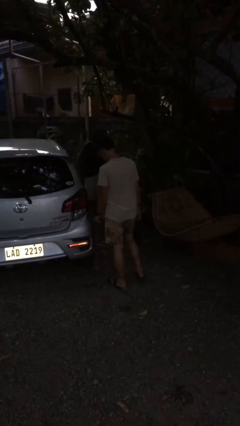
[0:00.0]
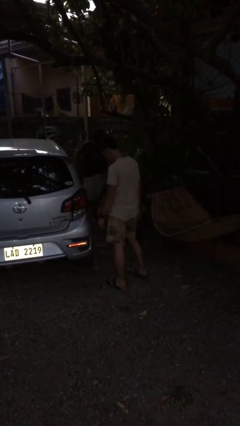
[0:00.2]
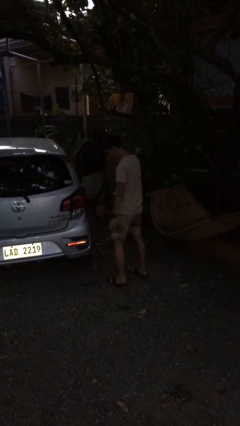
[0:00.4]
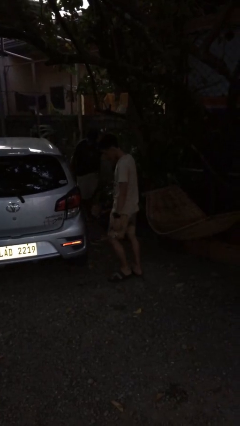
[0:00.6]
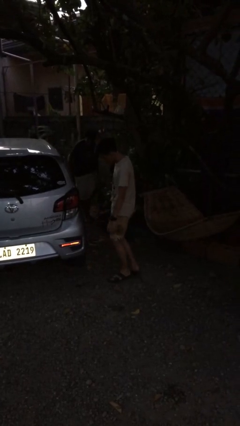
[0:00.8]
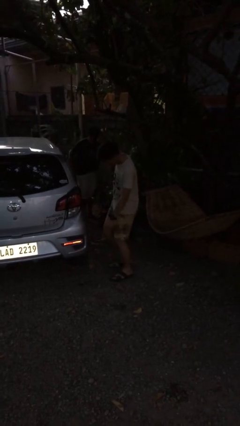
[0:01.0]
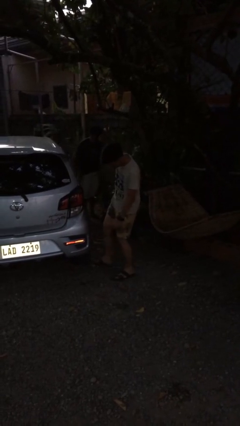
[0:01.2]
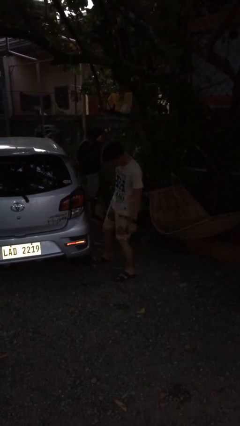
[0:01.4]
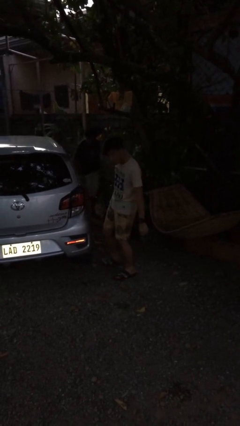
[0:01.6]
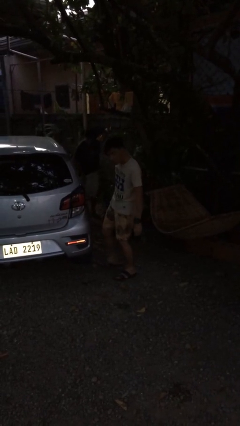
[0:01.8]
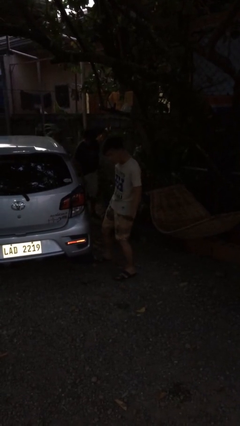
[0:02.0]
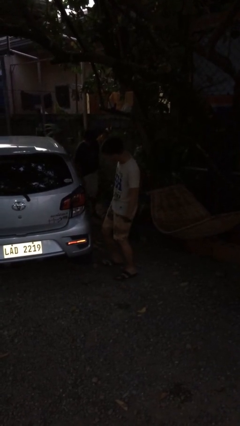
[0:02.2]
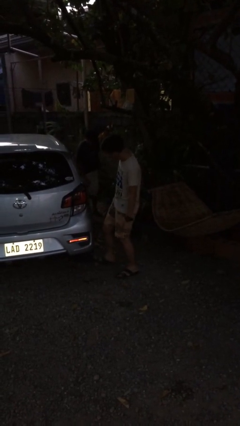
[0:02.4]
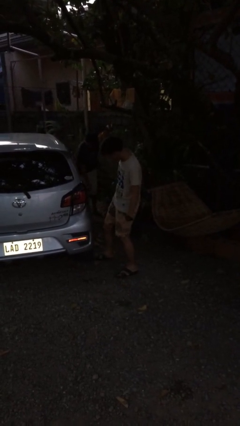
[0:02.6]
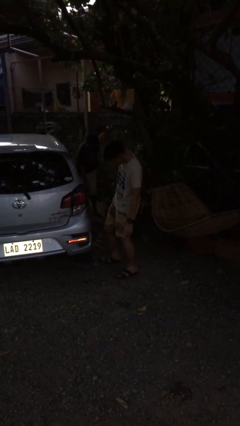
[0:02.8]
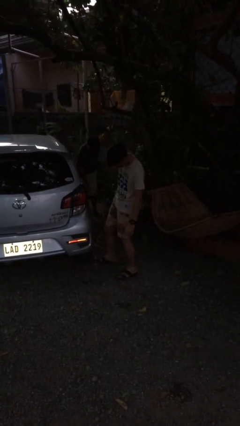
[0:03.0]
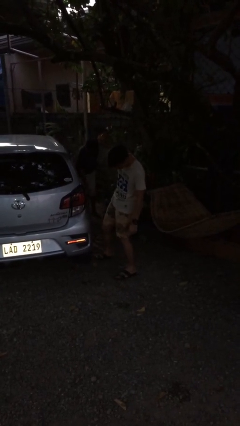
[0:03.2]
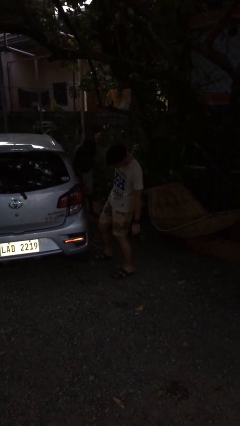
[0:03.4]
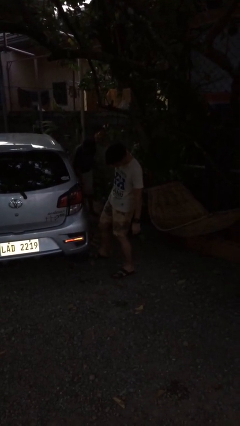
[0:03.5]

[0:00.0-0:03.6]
person kicks car tires

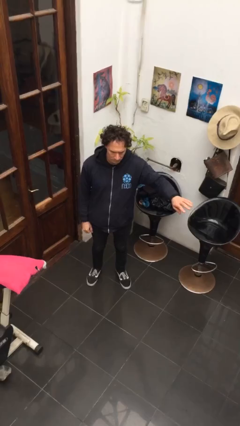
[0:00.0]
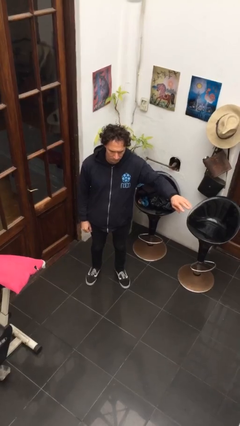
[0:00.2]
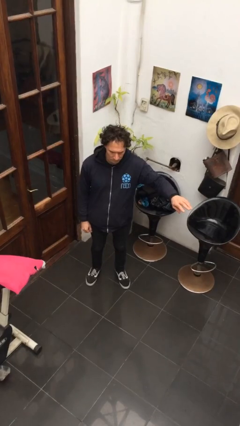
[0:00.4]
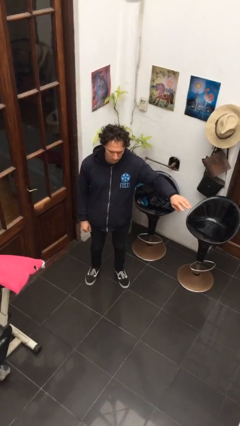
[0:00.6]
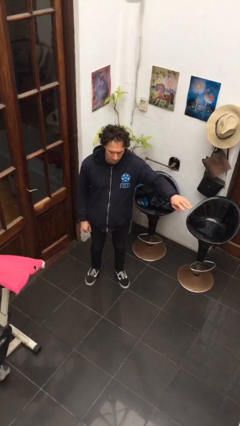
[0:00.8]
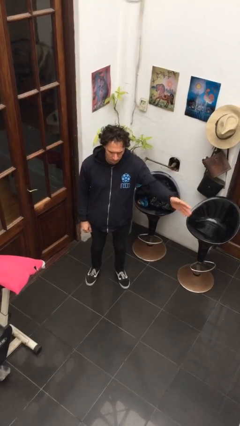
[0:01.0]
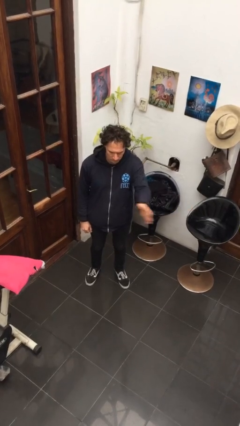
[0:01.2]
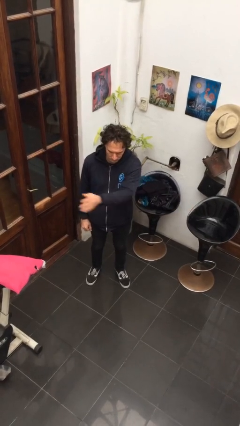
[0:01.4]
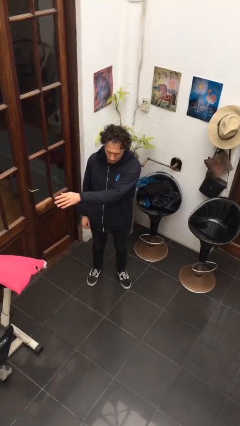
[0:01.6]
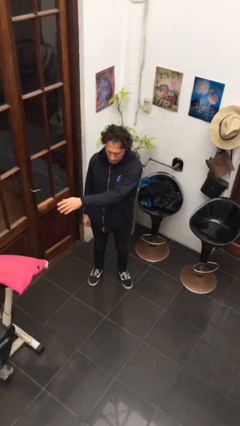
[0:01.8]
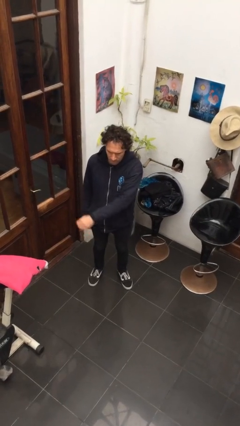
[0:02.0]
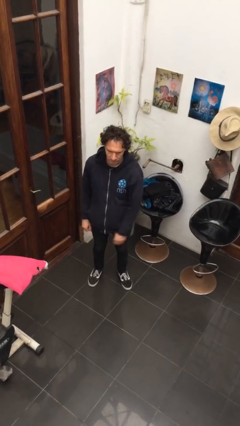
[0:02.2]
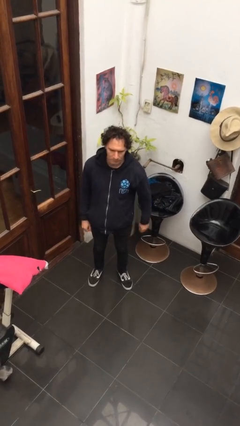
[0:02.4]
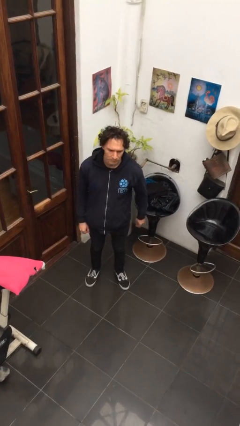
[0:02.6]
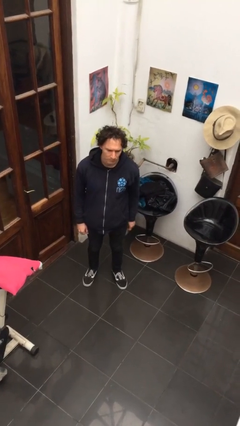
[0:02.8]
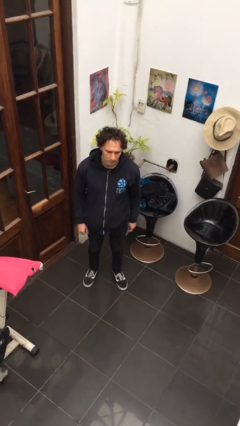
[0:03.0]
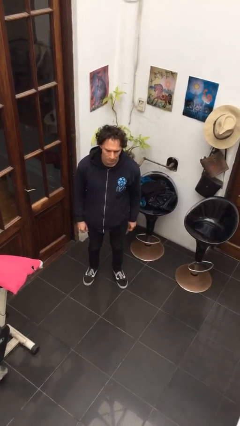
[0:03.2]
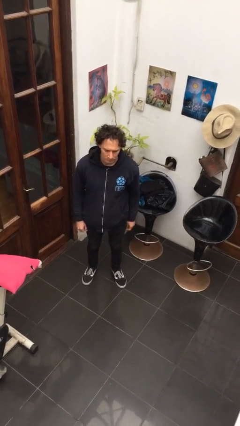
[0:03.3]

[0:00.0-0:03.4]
person gestures swipe right

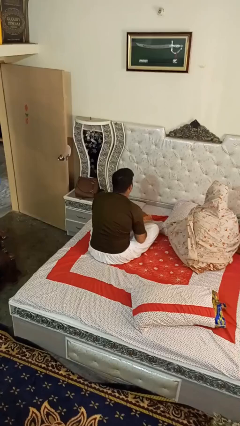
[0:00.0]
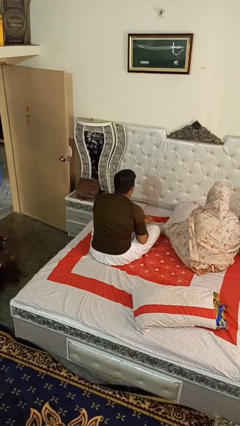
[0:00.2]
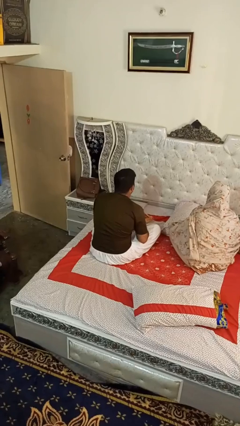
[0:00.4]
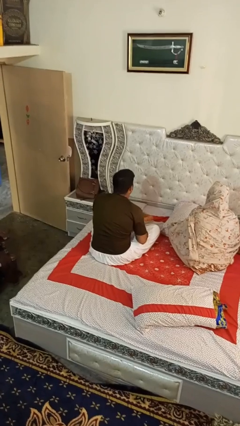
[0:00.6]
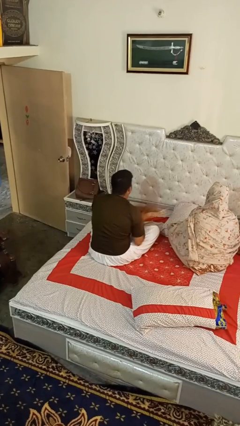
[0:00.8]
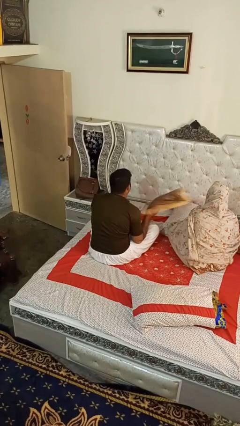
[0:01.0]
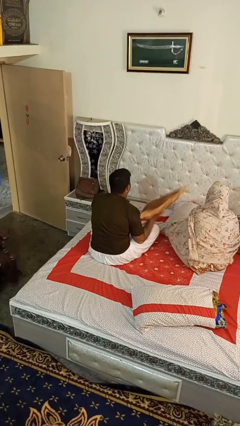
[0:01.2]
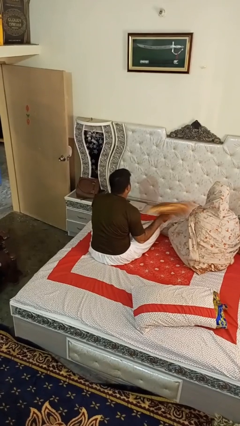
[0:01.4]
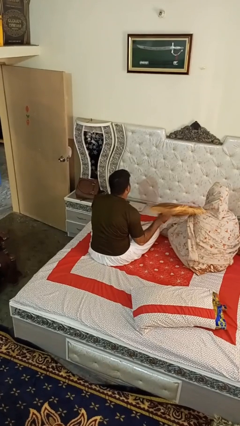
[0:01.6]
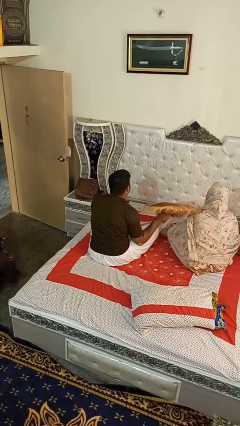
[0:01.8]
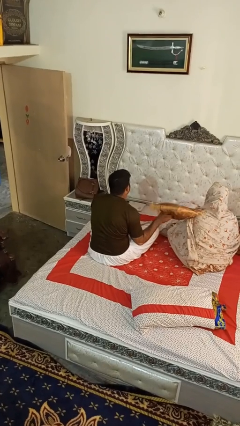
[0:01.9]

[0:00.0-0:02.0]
person hits person with pillow

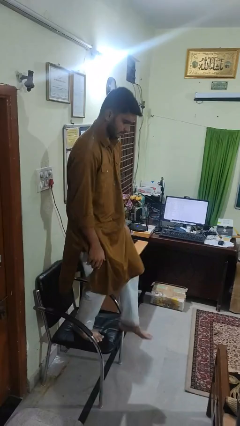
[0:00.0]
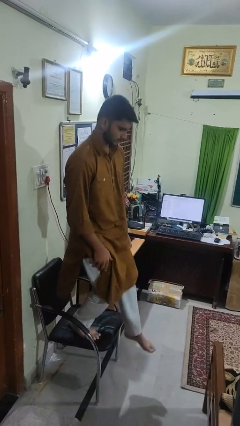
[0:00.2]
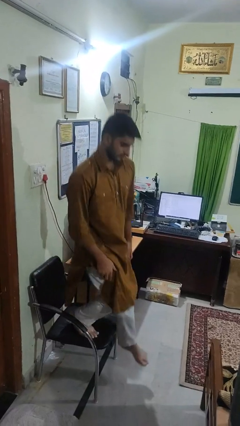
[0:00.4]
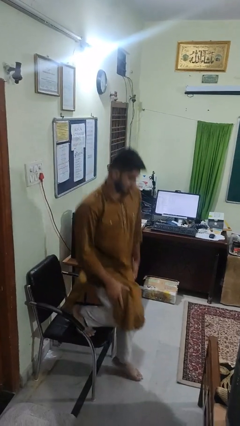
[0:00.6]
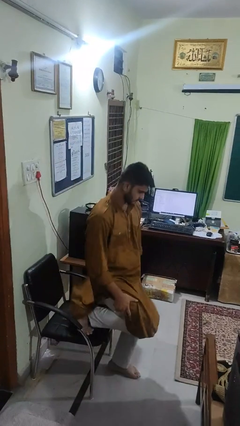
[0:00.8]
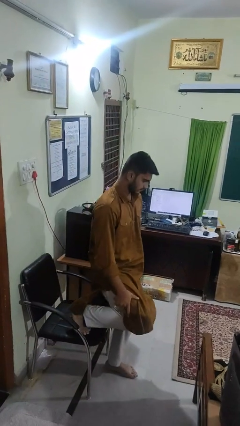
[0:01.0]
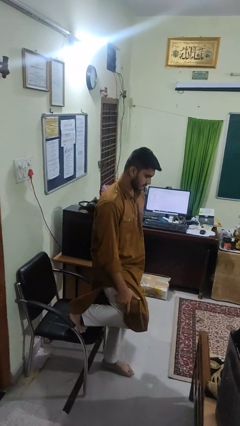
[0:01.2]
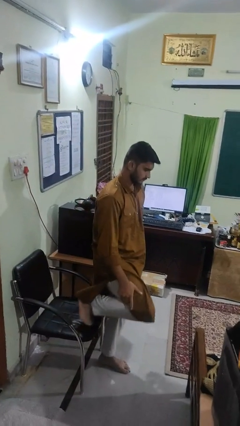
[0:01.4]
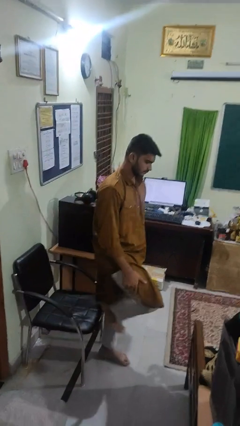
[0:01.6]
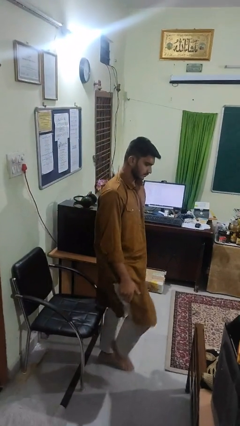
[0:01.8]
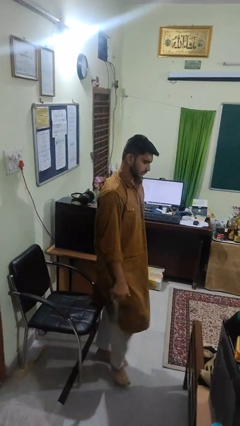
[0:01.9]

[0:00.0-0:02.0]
person climbs off chair

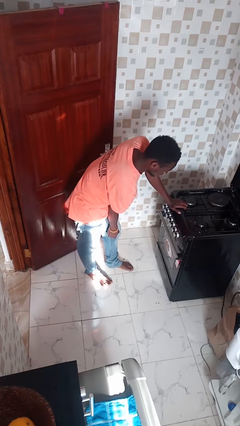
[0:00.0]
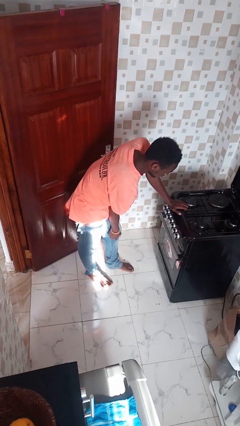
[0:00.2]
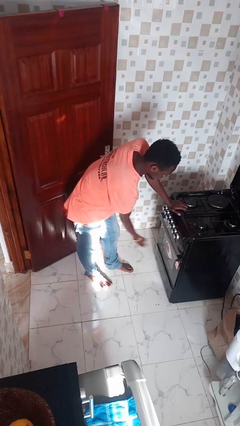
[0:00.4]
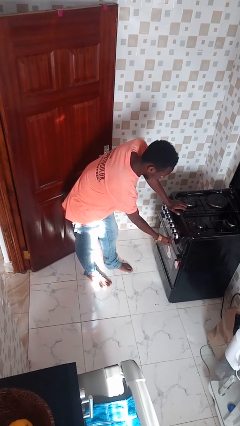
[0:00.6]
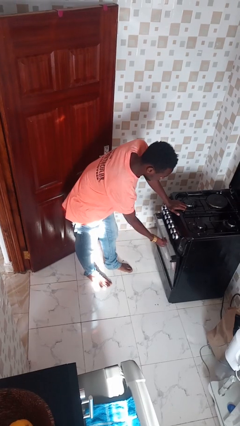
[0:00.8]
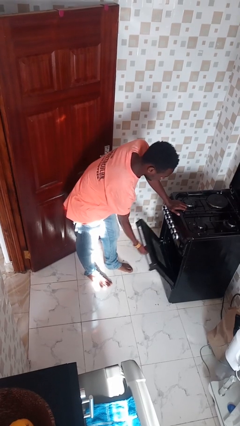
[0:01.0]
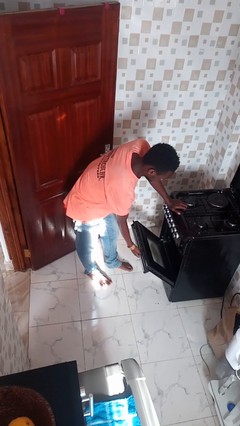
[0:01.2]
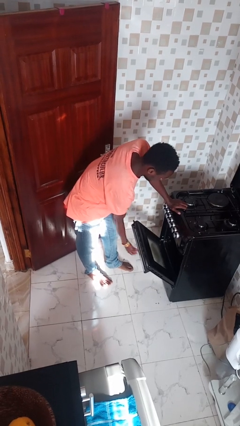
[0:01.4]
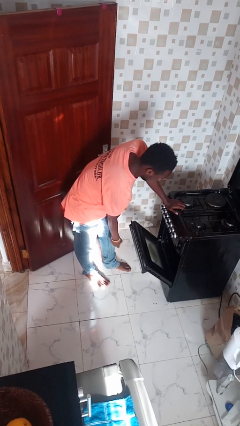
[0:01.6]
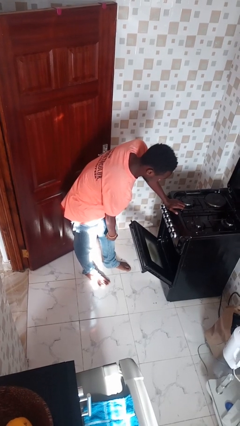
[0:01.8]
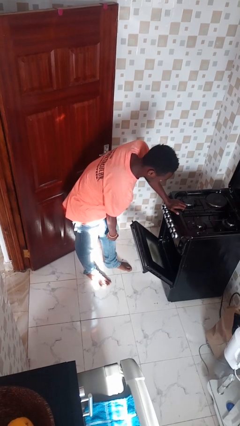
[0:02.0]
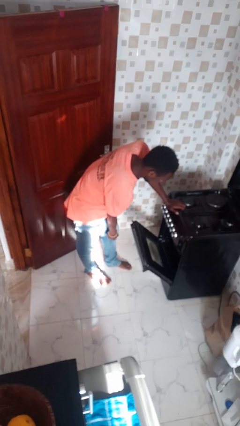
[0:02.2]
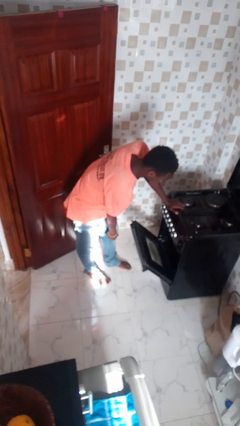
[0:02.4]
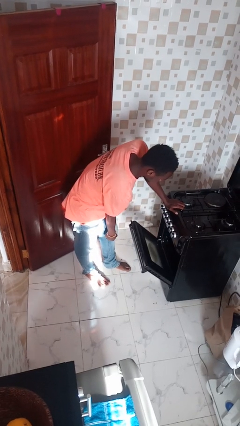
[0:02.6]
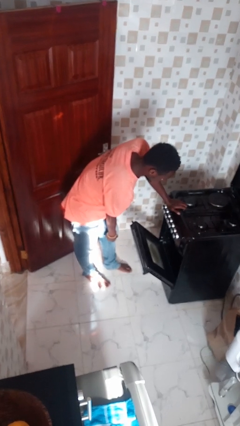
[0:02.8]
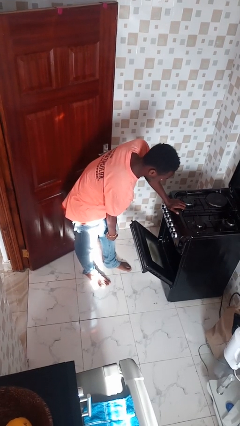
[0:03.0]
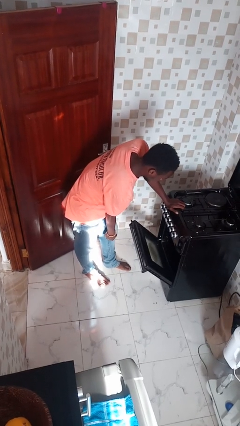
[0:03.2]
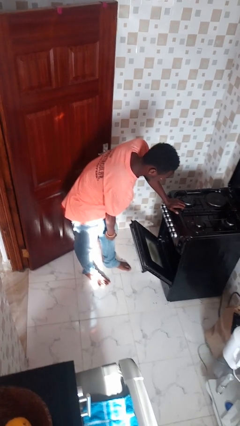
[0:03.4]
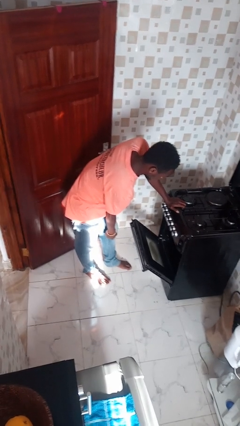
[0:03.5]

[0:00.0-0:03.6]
person opens oven door

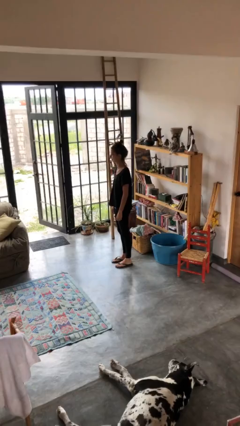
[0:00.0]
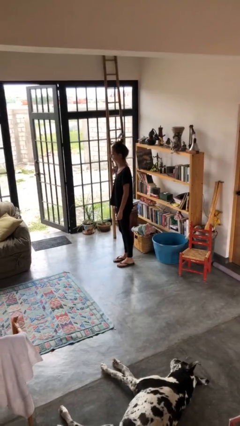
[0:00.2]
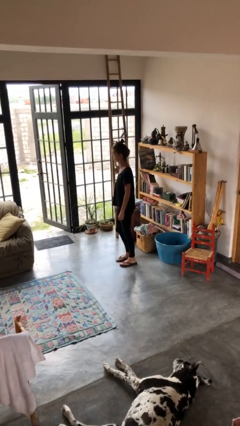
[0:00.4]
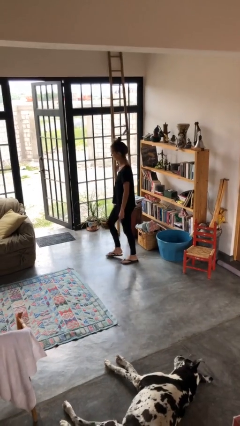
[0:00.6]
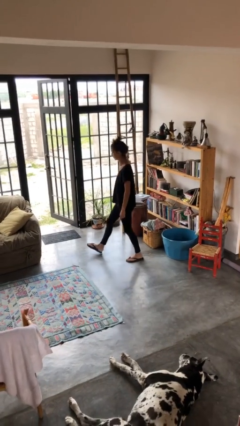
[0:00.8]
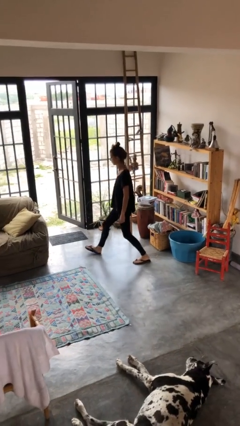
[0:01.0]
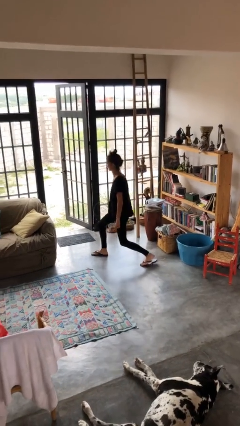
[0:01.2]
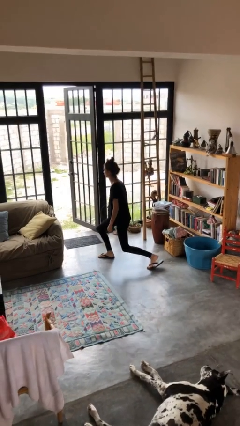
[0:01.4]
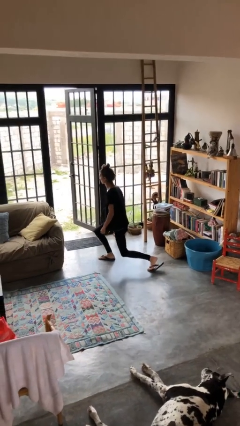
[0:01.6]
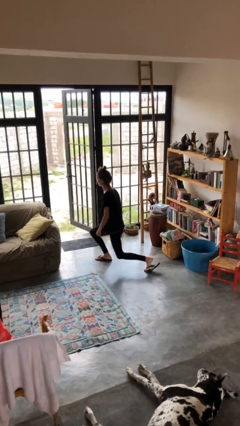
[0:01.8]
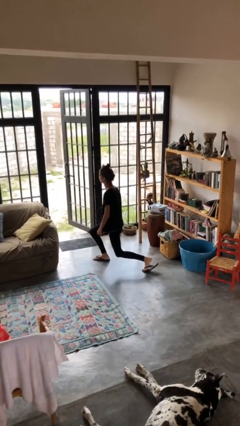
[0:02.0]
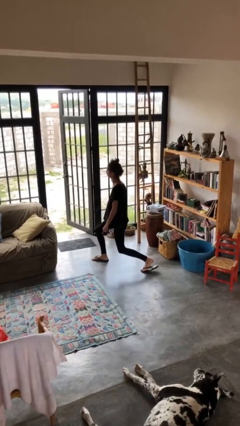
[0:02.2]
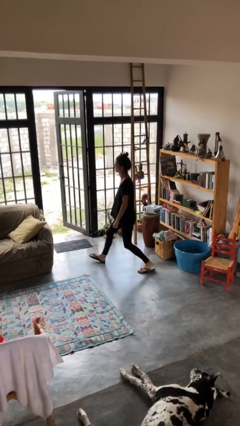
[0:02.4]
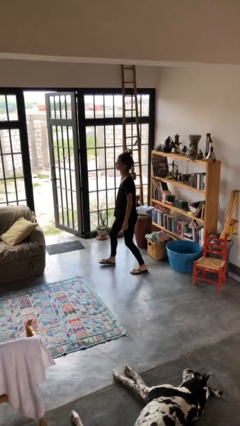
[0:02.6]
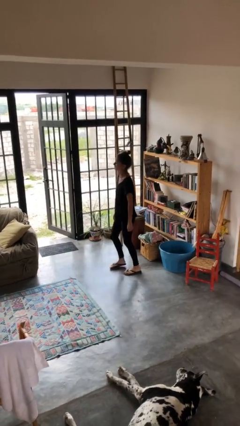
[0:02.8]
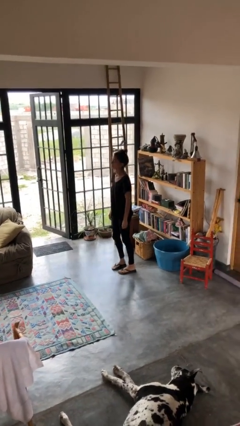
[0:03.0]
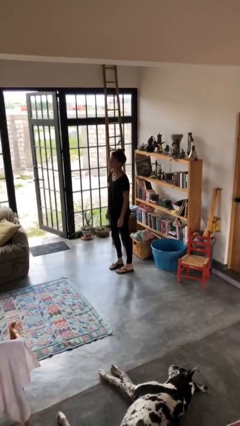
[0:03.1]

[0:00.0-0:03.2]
person exercises with lunges
